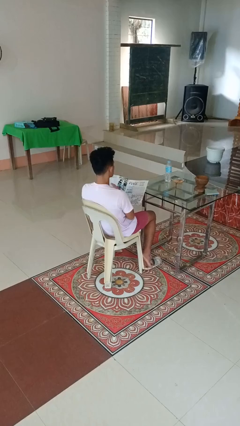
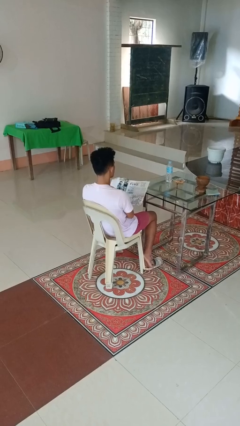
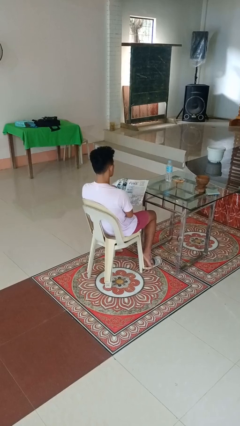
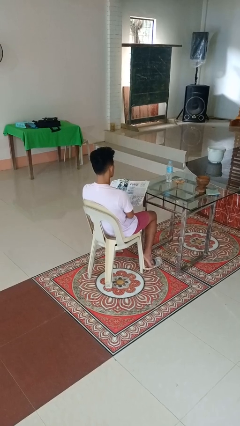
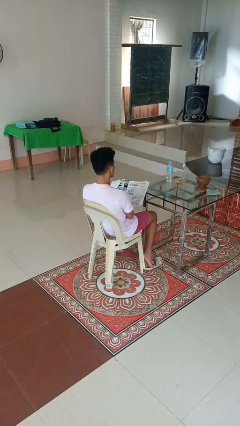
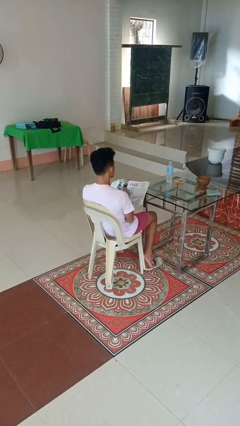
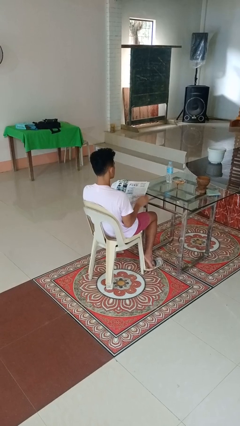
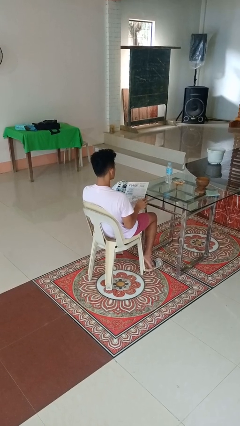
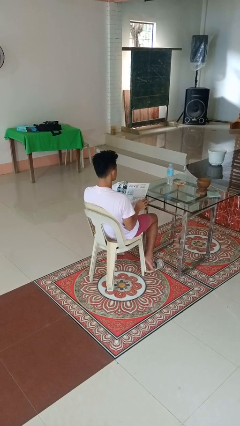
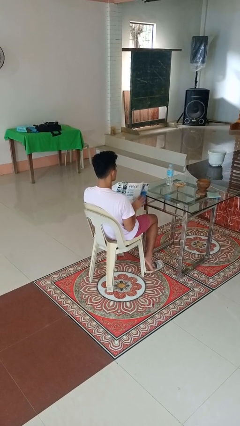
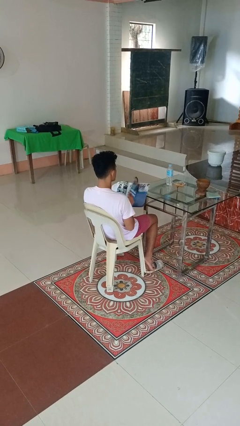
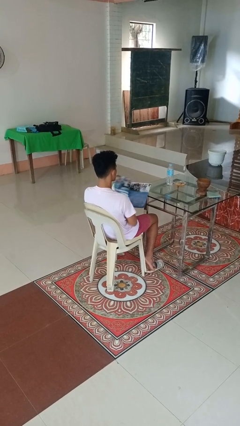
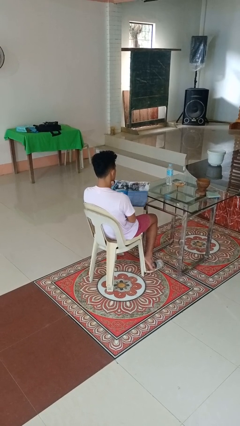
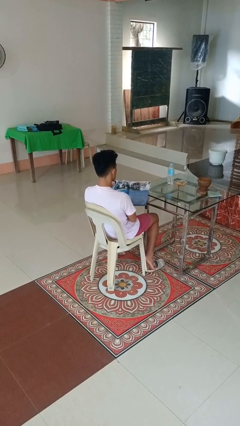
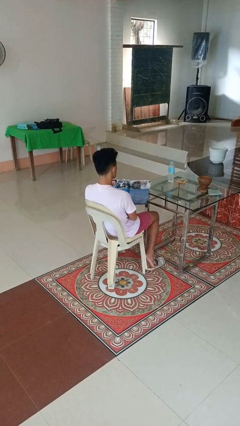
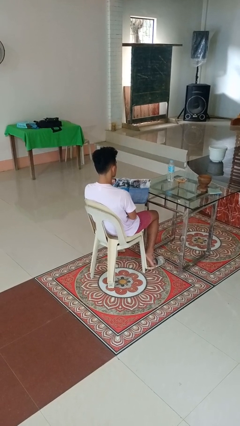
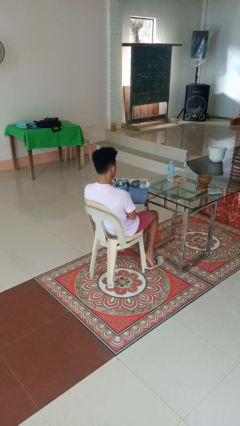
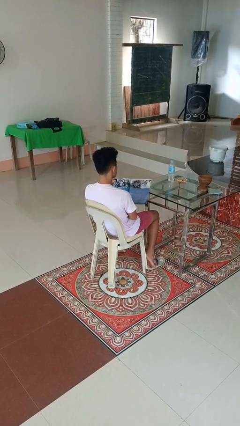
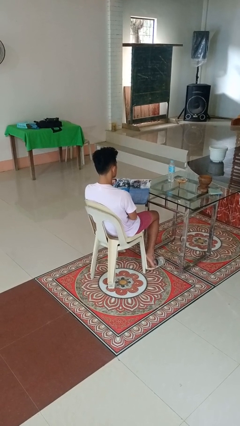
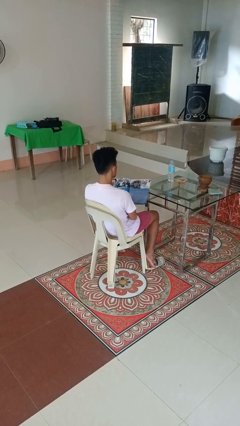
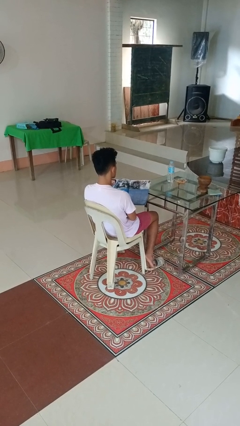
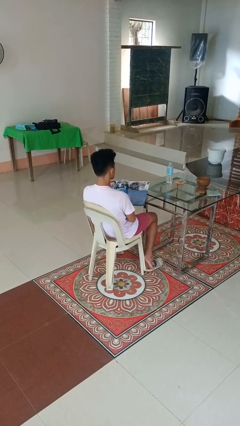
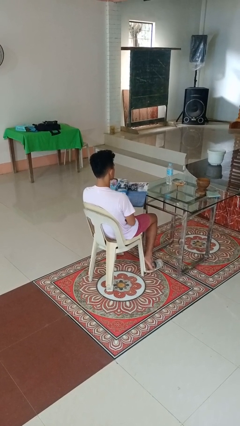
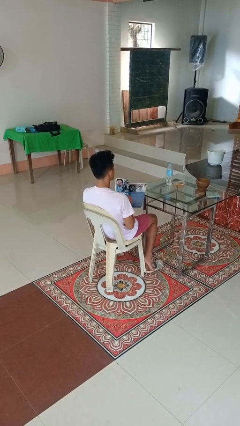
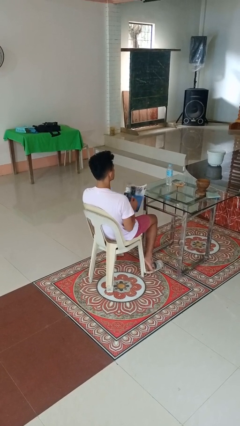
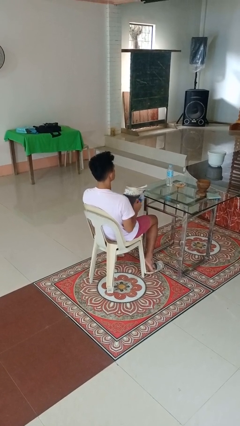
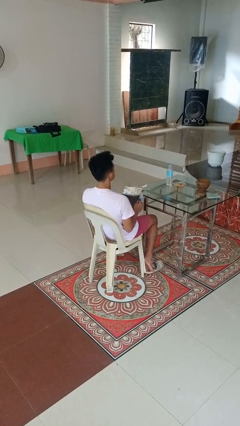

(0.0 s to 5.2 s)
person reads magazine

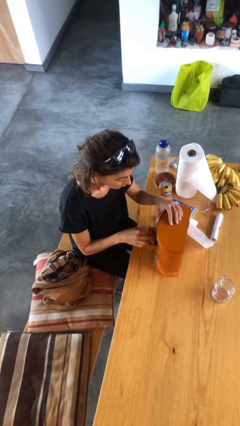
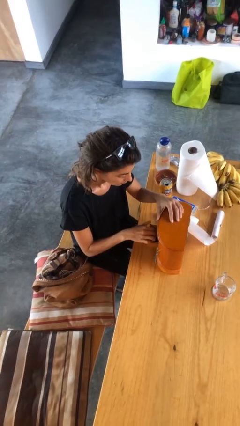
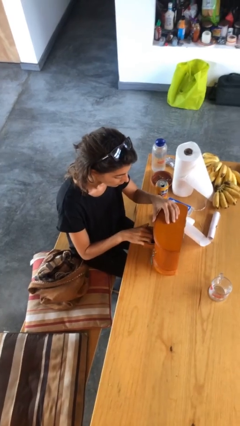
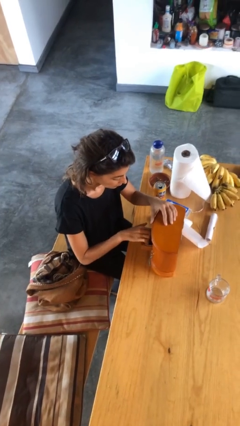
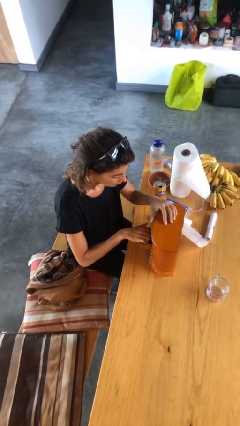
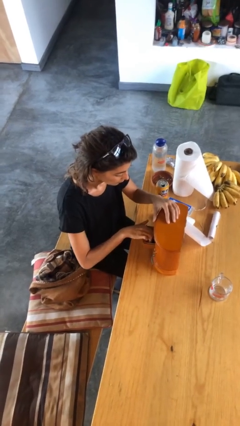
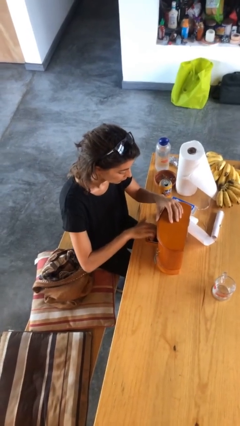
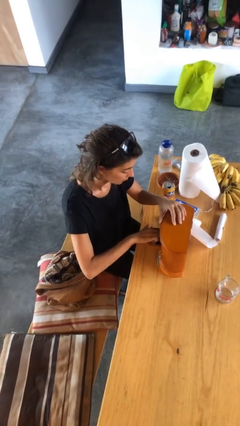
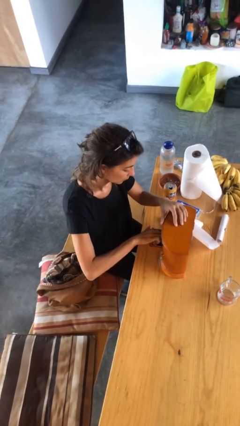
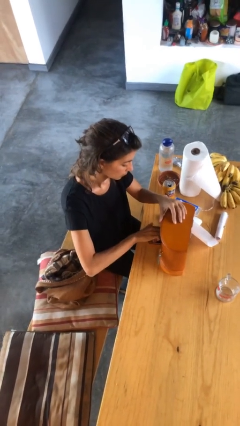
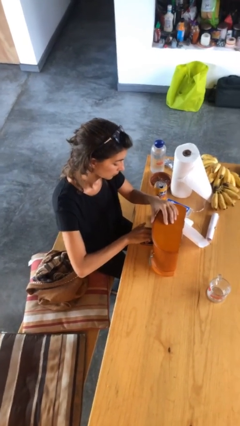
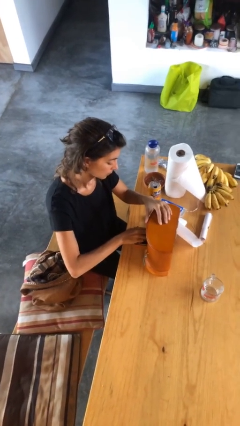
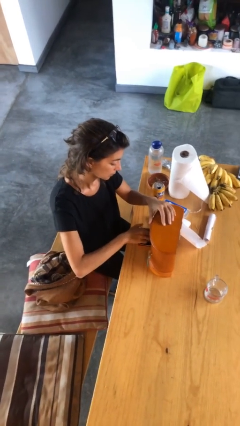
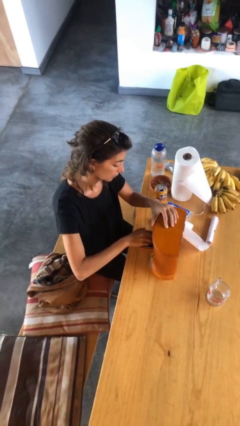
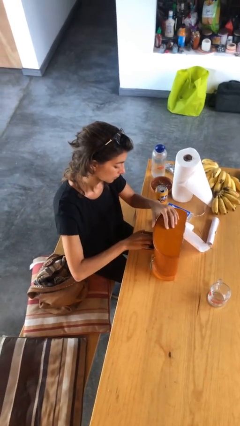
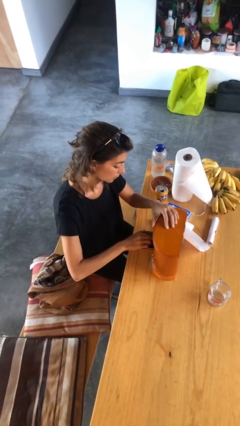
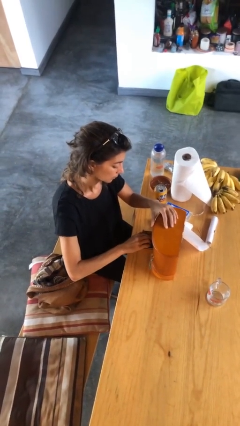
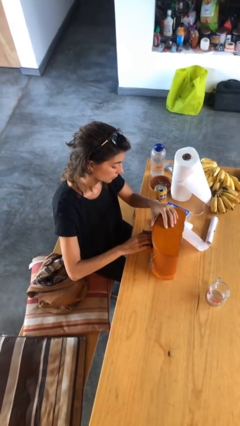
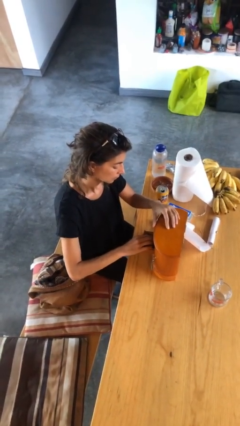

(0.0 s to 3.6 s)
person searches jewelry box

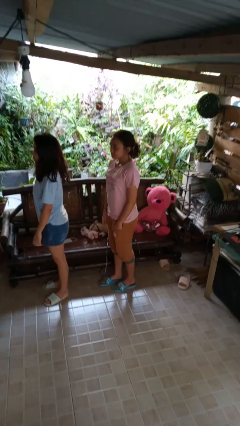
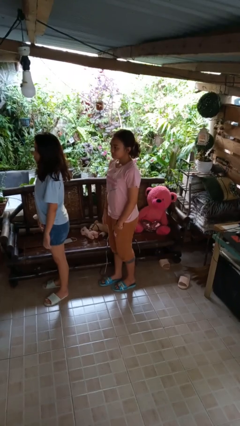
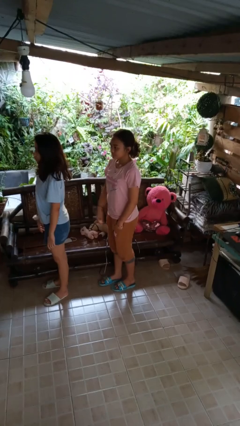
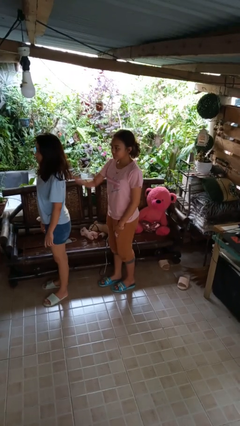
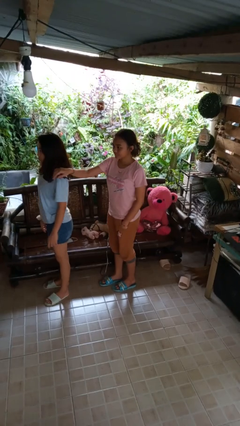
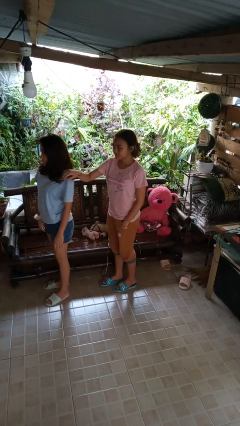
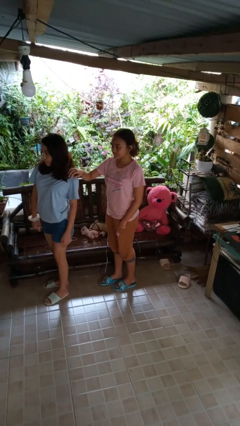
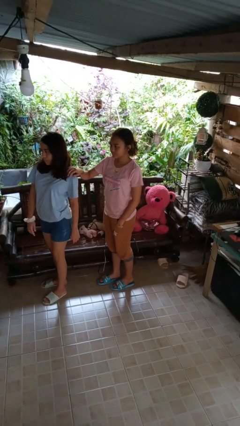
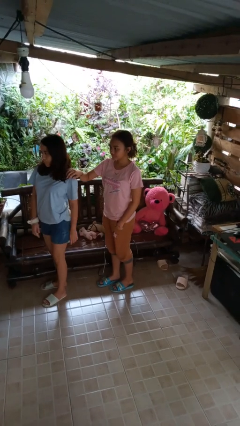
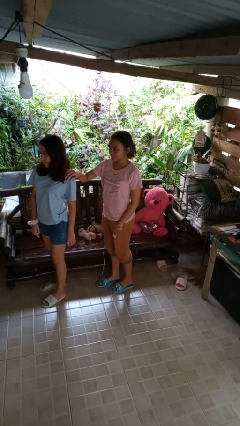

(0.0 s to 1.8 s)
person grabs person by shoulder

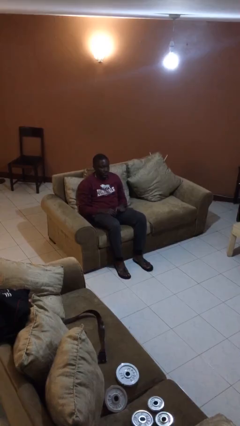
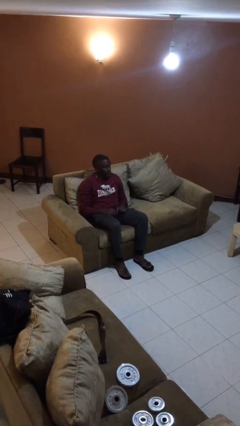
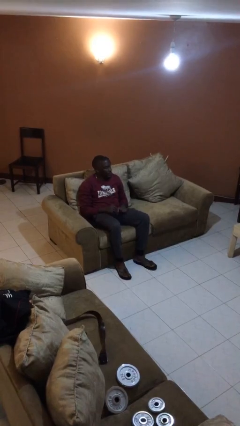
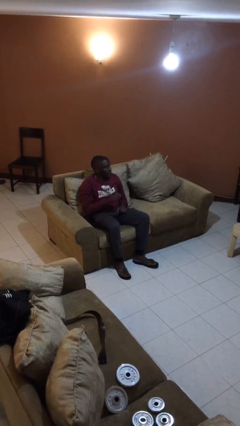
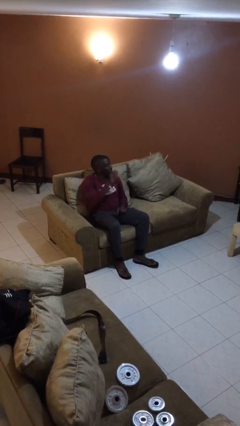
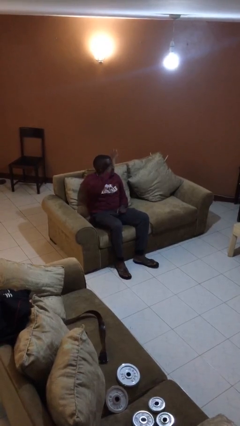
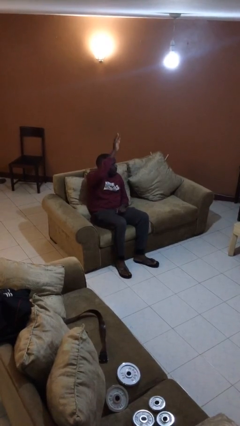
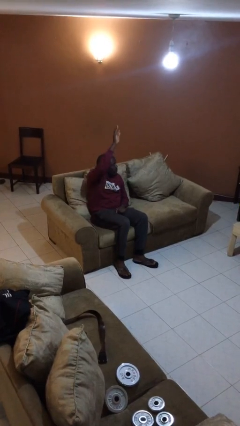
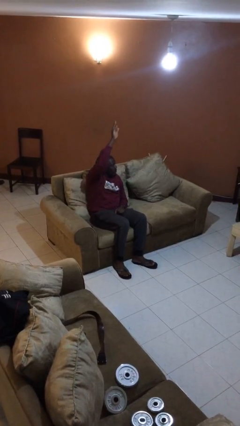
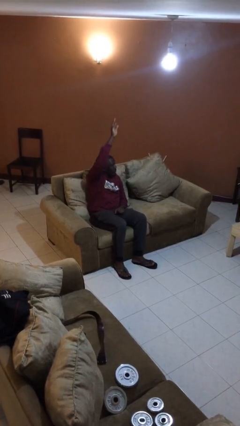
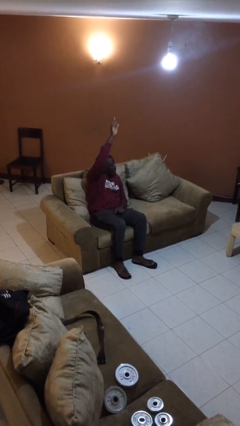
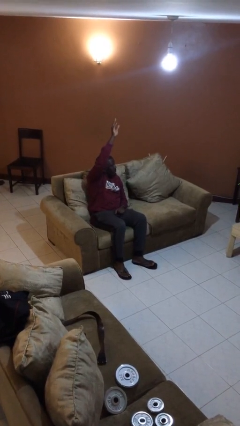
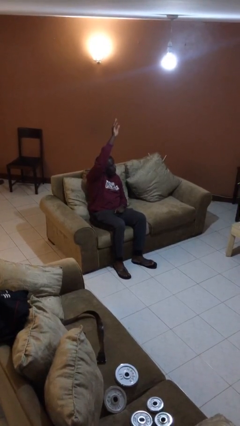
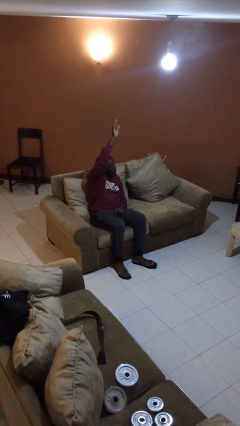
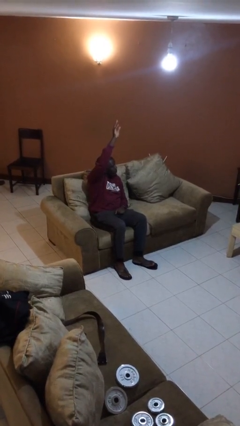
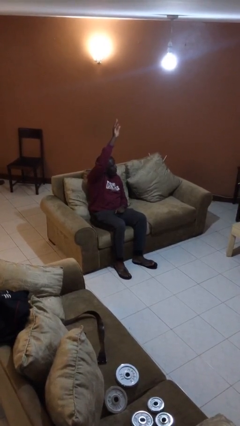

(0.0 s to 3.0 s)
person gestures raise hand

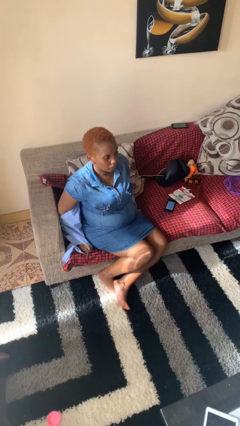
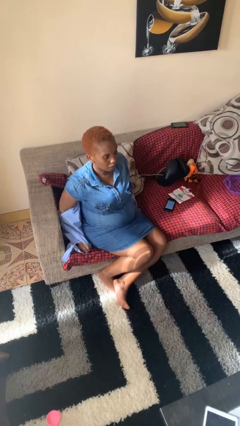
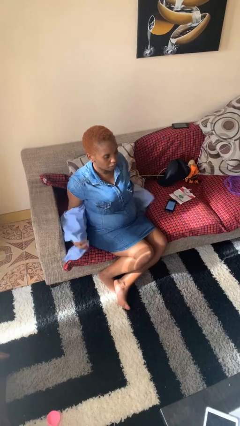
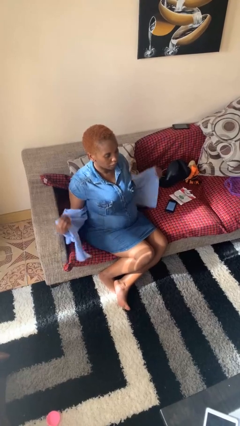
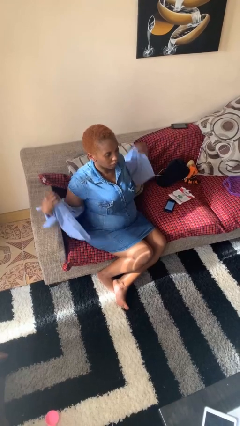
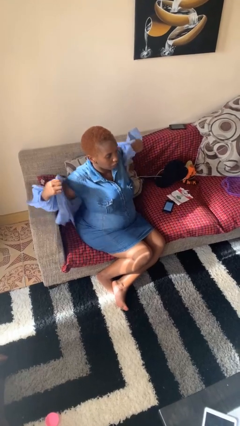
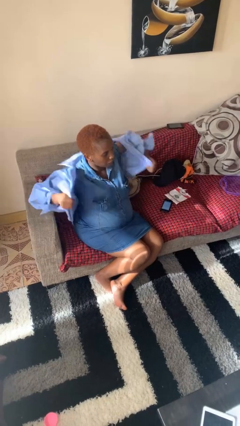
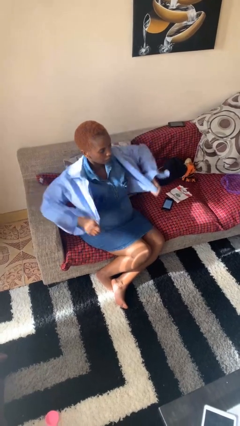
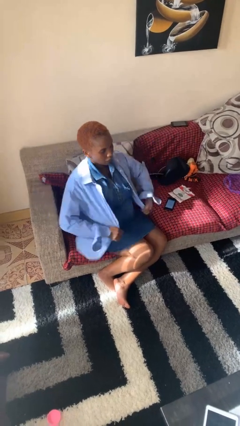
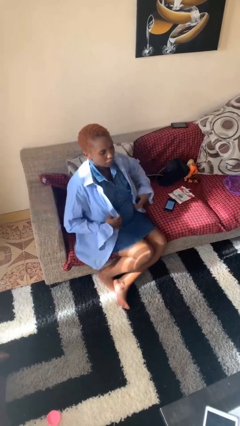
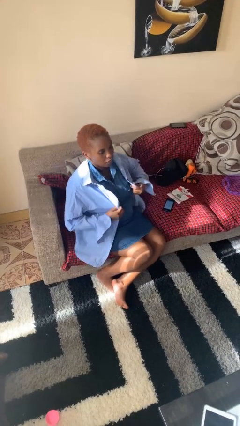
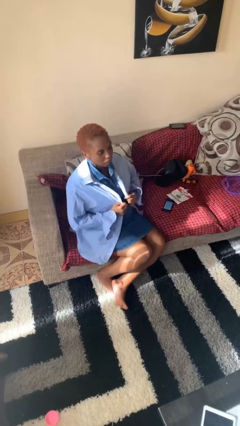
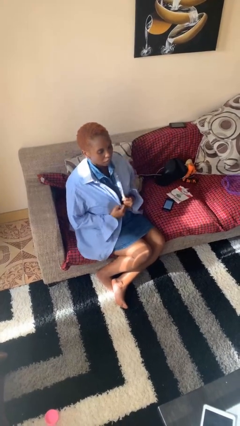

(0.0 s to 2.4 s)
person puts on shirt

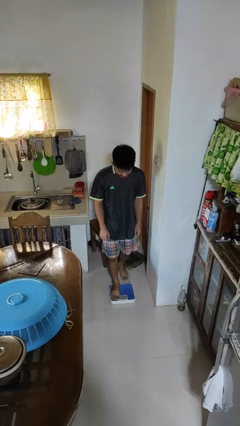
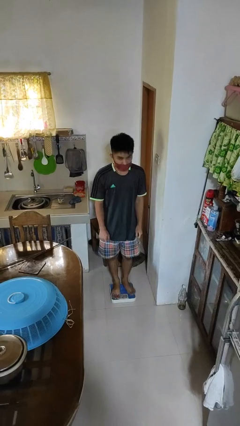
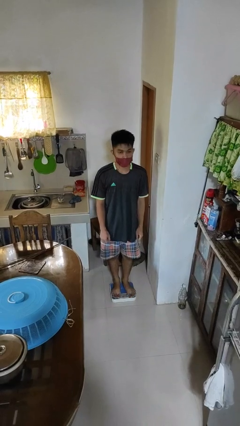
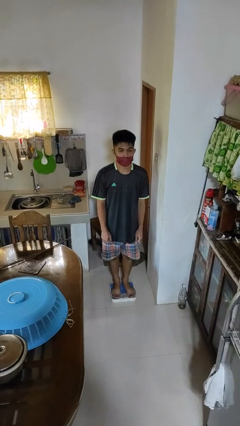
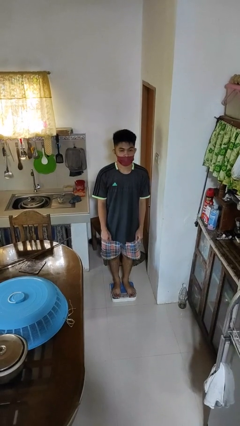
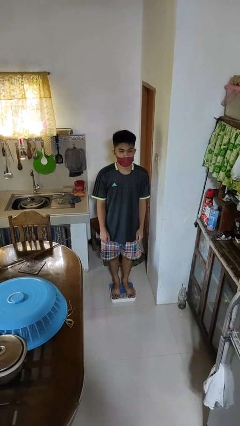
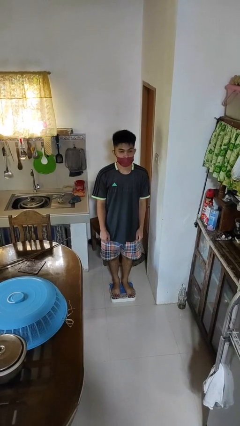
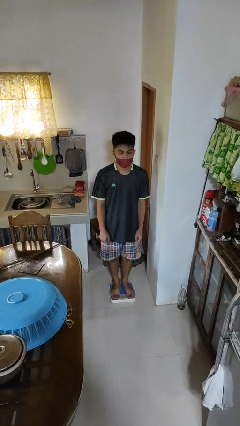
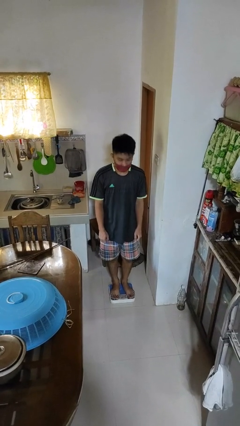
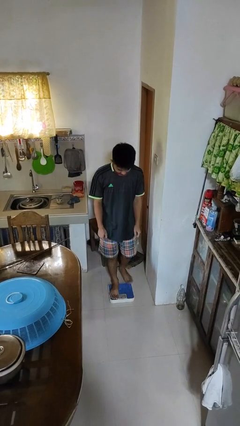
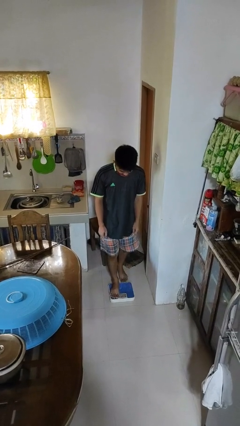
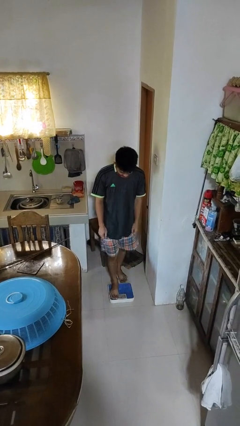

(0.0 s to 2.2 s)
person uses bodyweight scale
